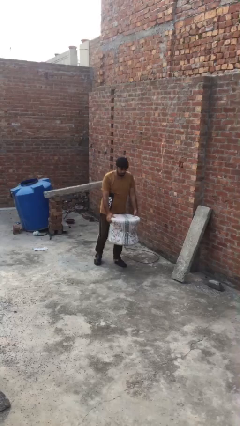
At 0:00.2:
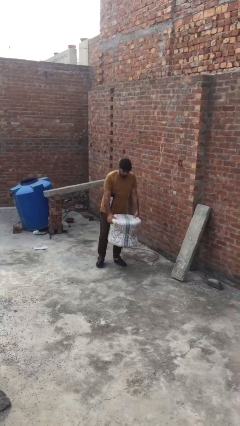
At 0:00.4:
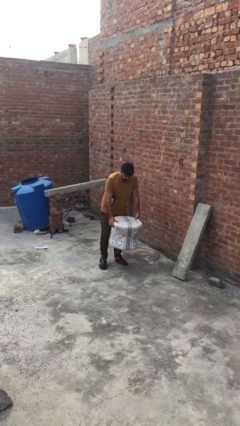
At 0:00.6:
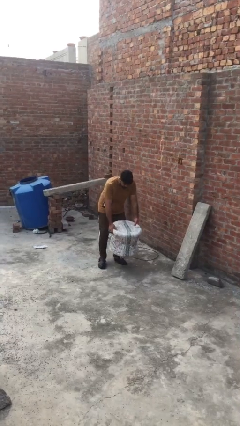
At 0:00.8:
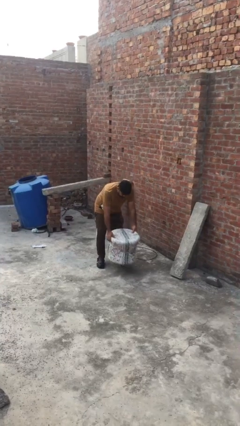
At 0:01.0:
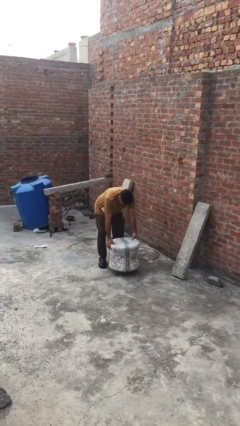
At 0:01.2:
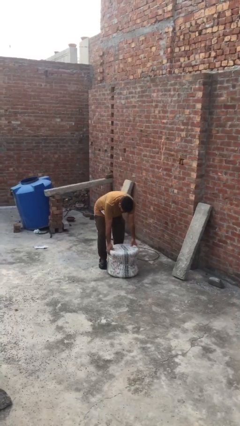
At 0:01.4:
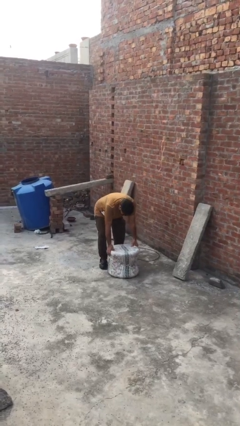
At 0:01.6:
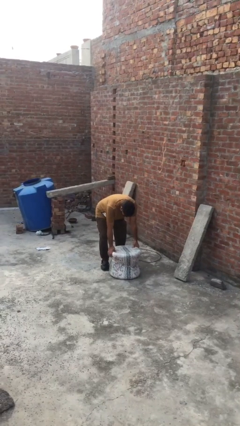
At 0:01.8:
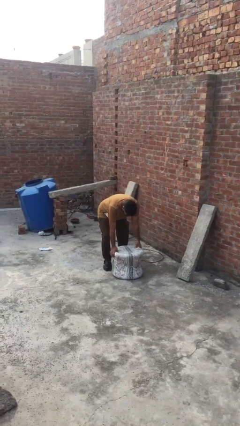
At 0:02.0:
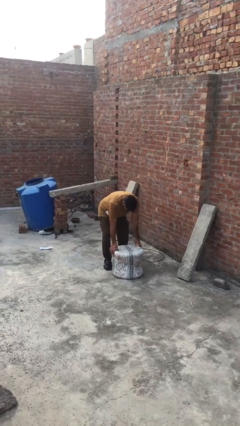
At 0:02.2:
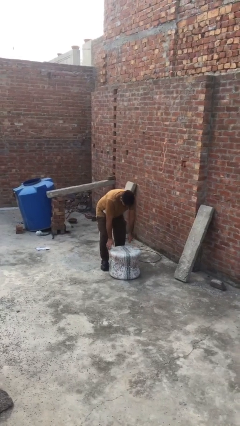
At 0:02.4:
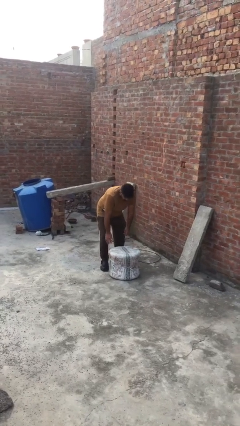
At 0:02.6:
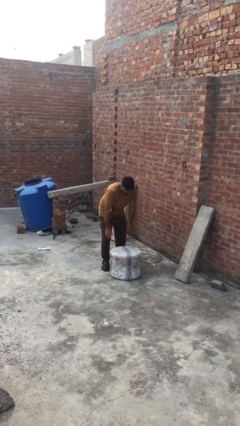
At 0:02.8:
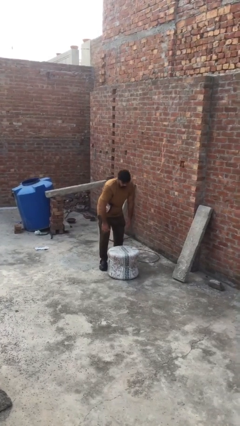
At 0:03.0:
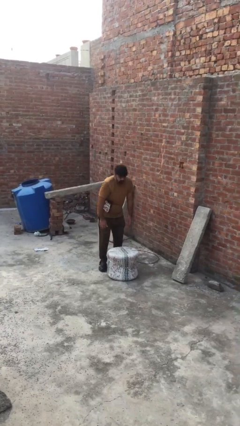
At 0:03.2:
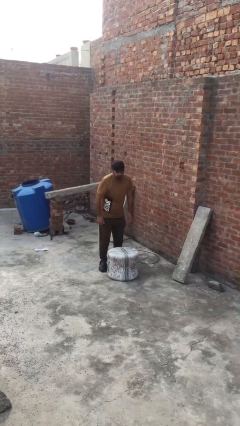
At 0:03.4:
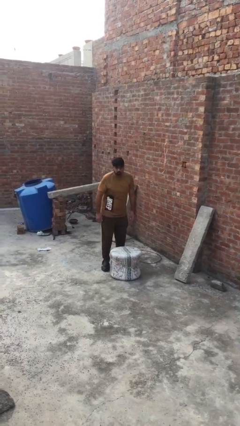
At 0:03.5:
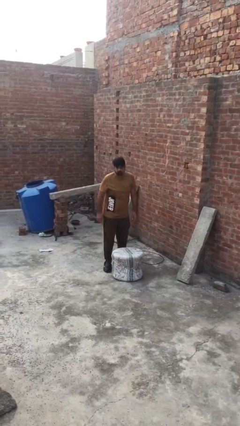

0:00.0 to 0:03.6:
person puts down object on floor

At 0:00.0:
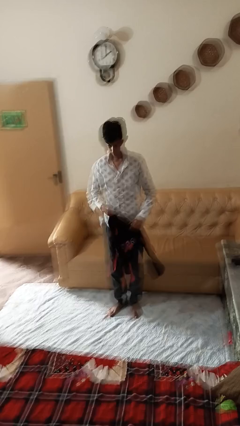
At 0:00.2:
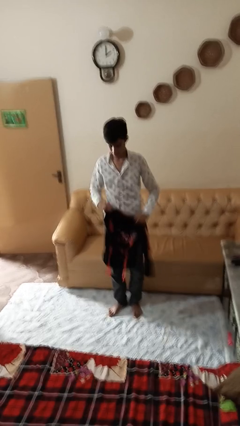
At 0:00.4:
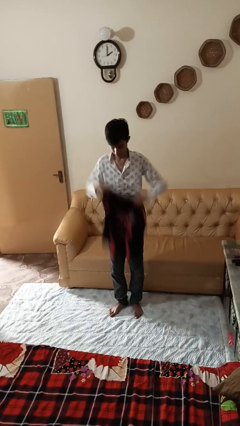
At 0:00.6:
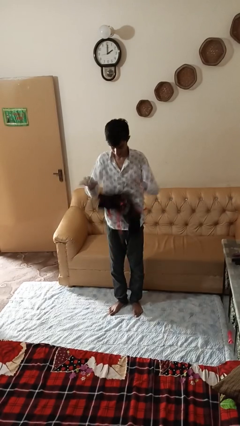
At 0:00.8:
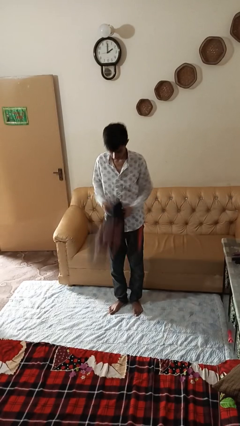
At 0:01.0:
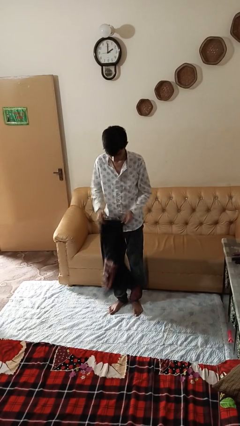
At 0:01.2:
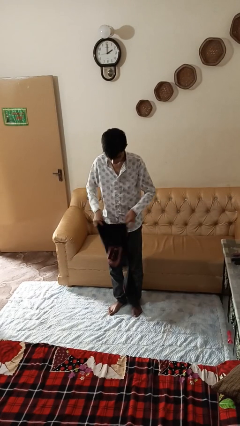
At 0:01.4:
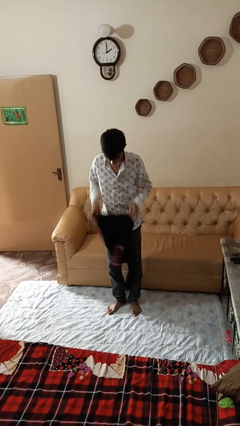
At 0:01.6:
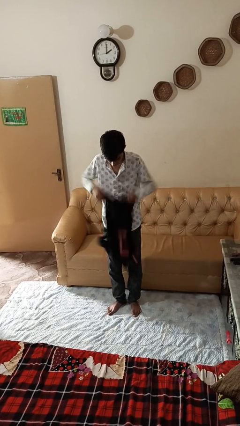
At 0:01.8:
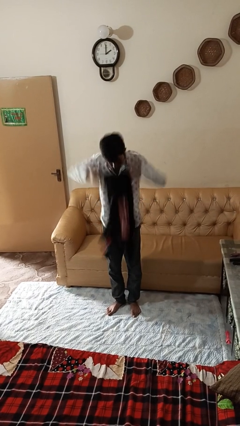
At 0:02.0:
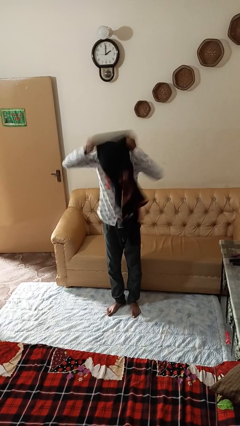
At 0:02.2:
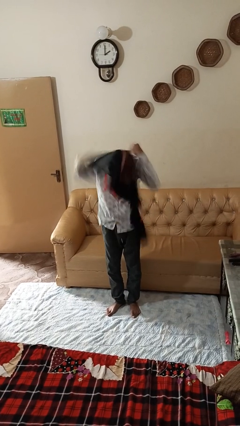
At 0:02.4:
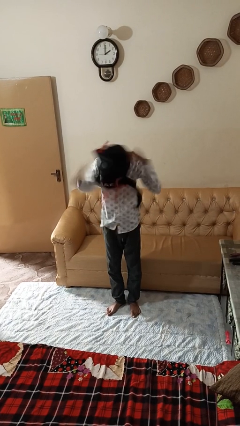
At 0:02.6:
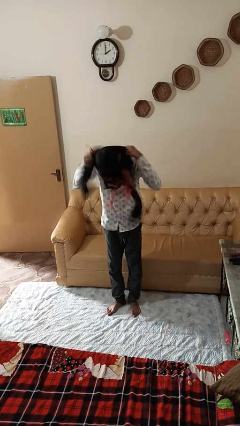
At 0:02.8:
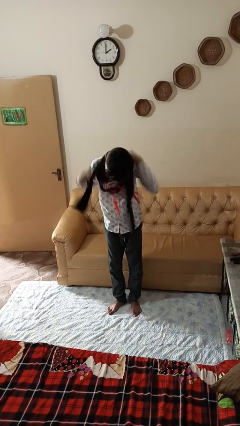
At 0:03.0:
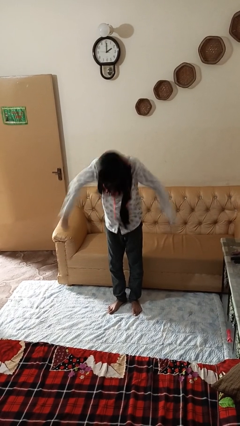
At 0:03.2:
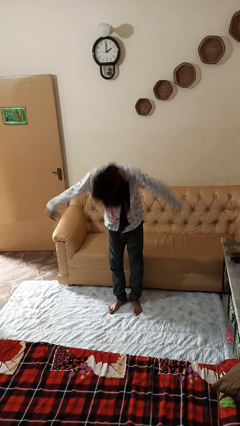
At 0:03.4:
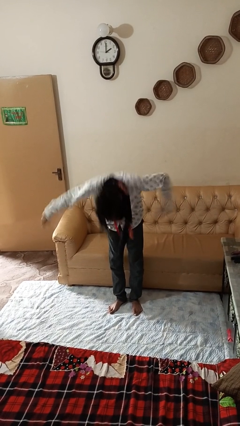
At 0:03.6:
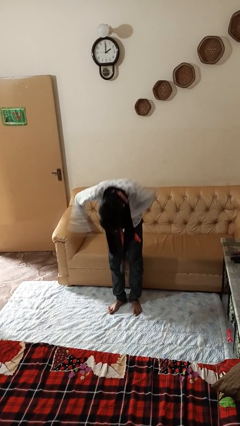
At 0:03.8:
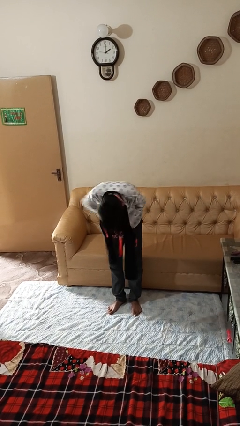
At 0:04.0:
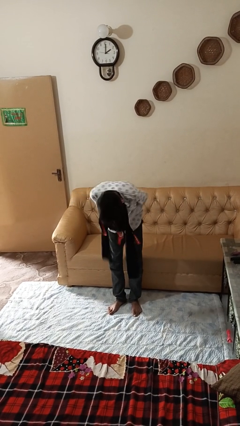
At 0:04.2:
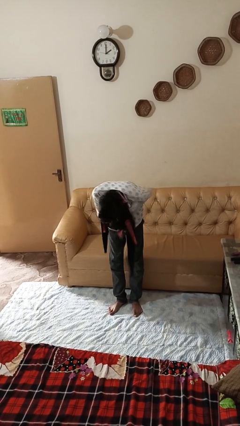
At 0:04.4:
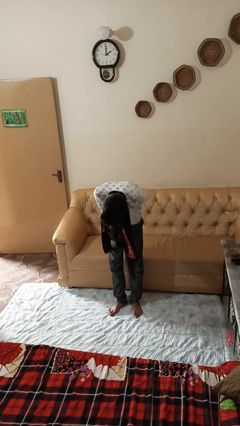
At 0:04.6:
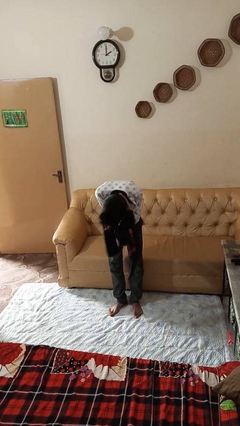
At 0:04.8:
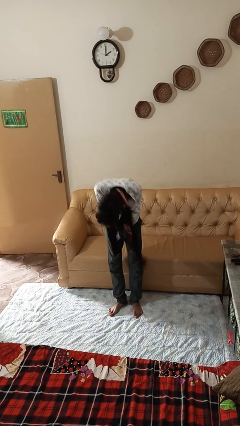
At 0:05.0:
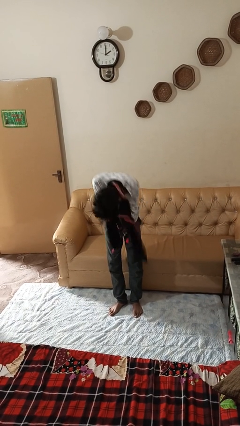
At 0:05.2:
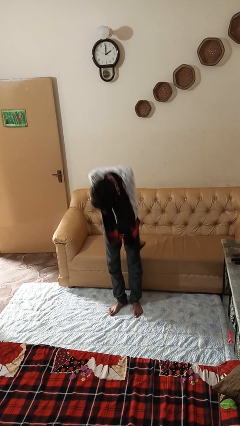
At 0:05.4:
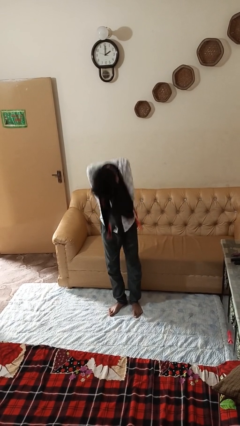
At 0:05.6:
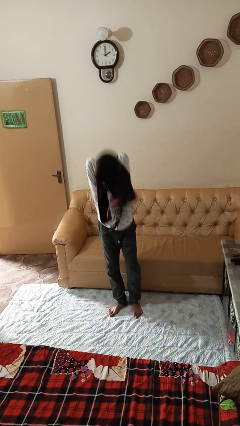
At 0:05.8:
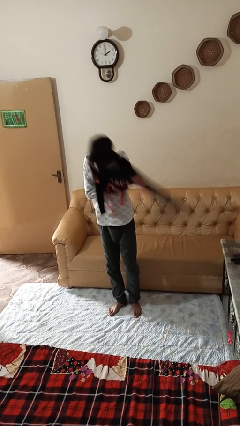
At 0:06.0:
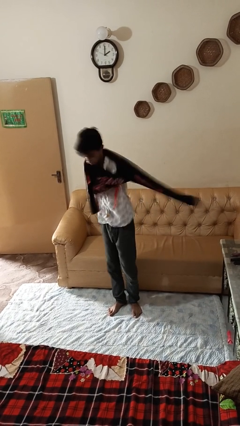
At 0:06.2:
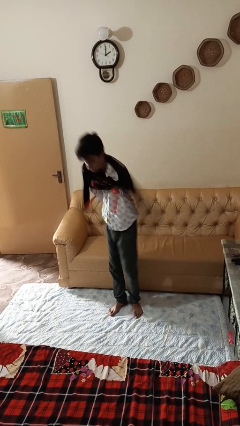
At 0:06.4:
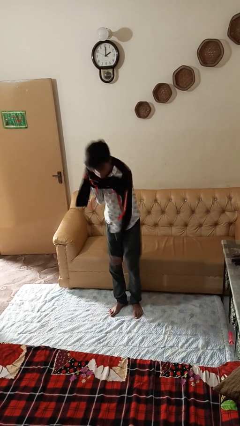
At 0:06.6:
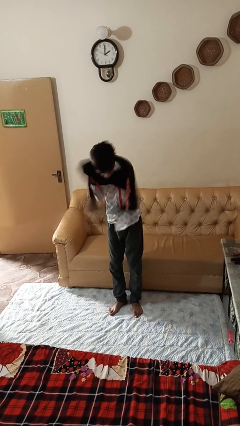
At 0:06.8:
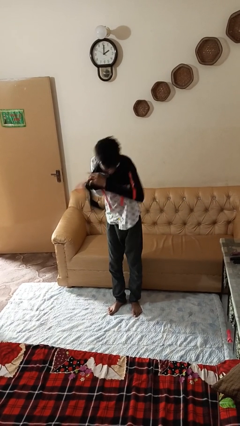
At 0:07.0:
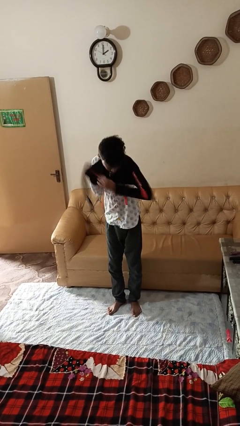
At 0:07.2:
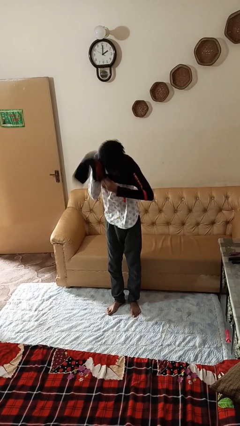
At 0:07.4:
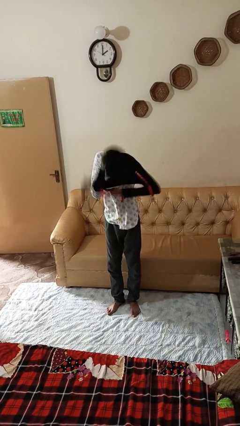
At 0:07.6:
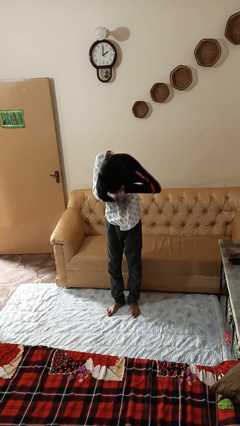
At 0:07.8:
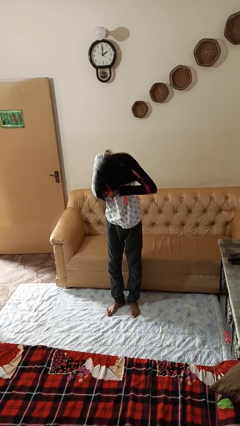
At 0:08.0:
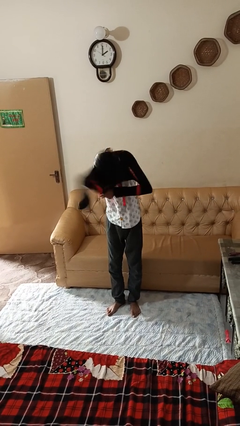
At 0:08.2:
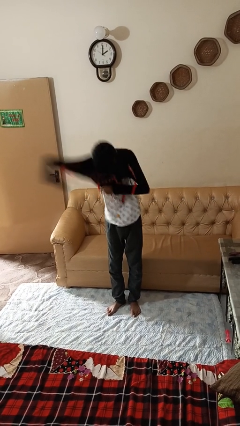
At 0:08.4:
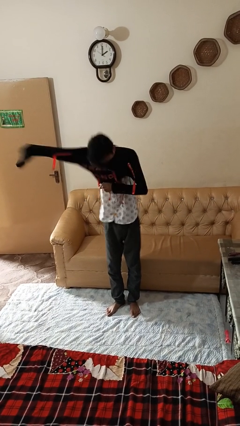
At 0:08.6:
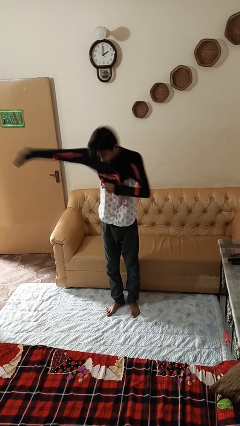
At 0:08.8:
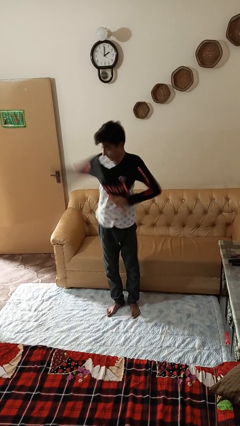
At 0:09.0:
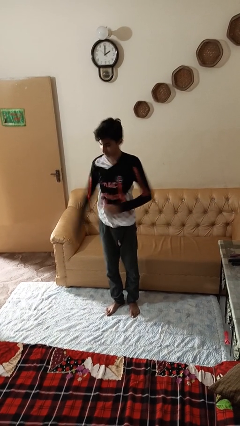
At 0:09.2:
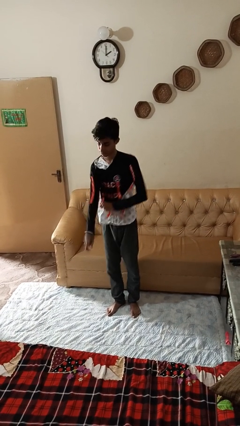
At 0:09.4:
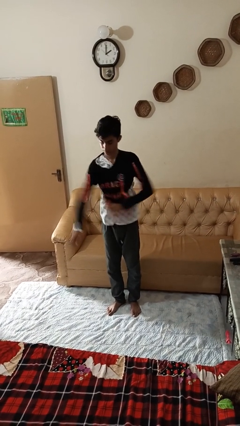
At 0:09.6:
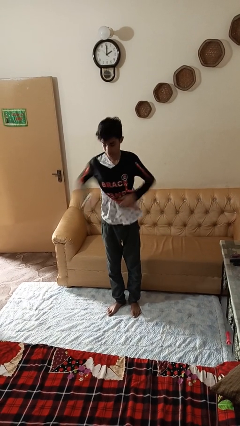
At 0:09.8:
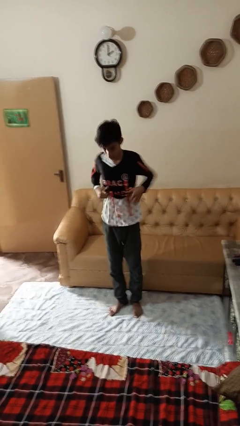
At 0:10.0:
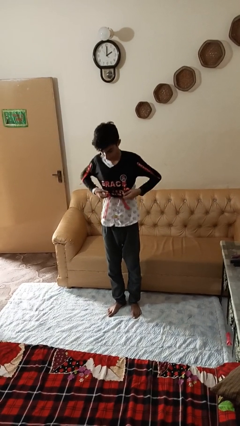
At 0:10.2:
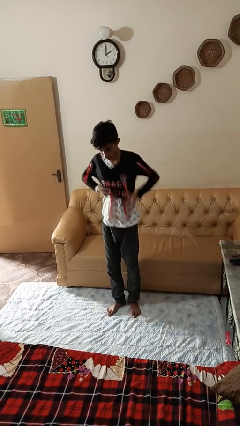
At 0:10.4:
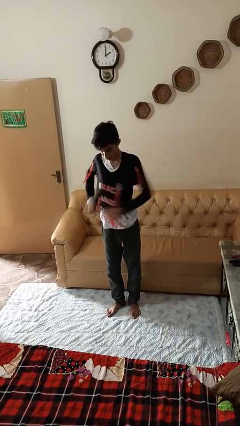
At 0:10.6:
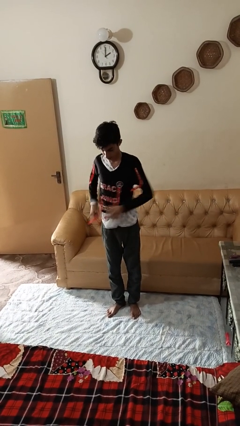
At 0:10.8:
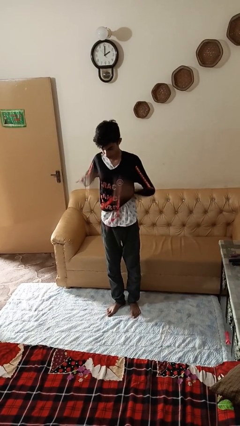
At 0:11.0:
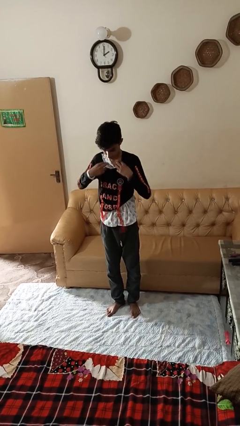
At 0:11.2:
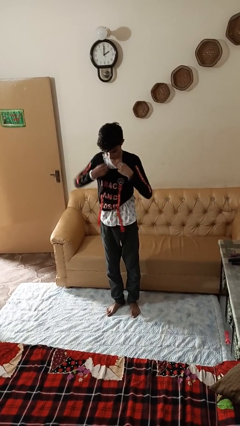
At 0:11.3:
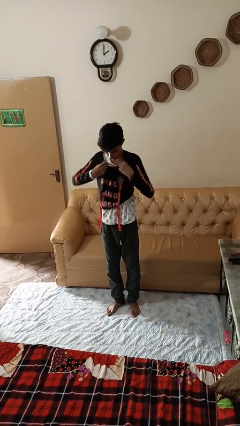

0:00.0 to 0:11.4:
person puts on shirt

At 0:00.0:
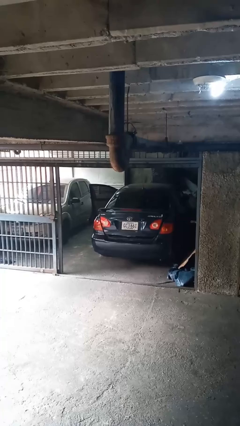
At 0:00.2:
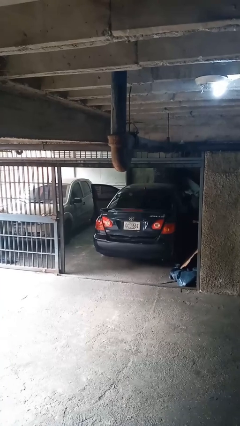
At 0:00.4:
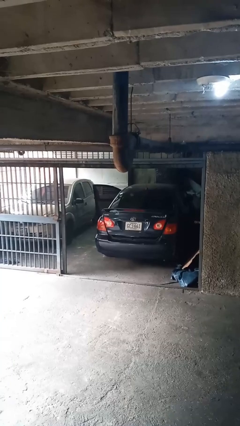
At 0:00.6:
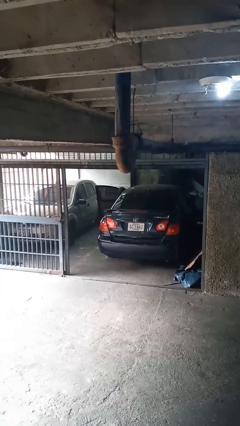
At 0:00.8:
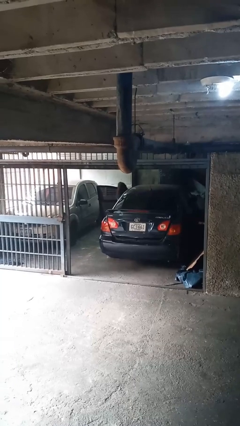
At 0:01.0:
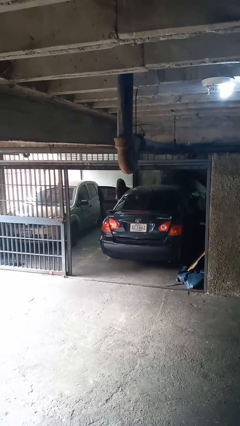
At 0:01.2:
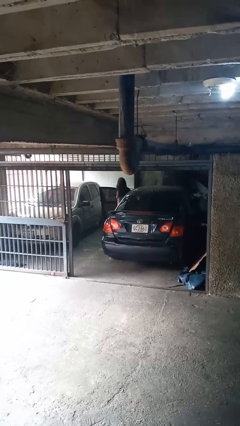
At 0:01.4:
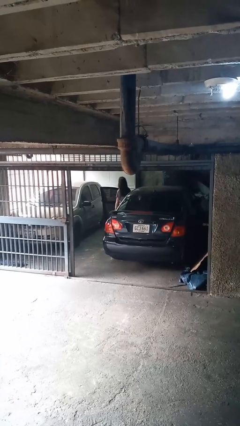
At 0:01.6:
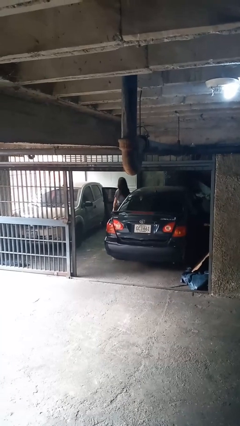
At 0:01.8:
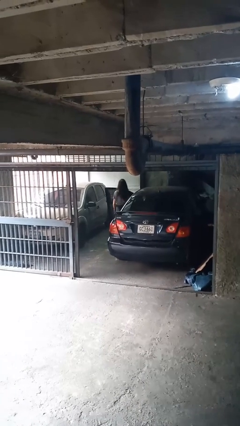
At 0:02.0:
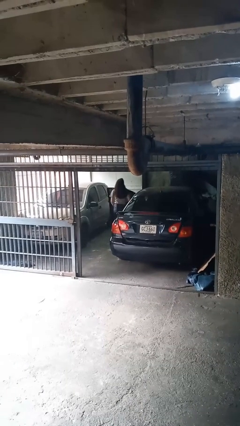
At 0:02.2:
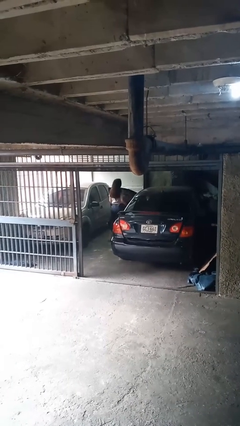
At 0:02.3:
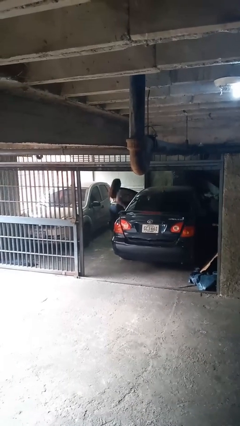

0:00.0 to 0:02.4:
person exits car

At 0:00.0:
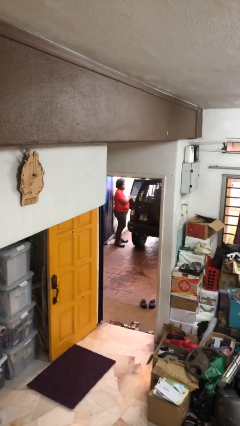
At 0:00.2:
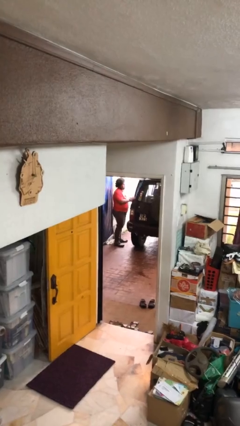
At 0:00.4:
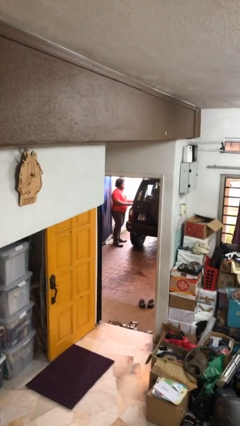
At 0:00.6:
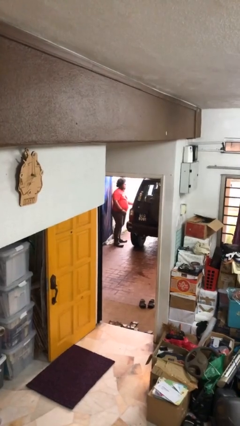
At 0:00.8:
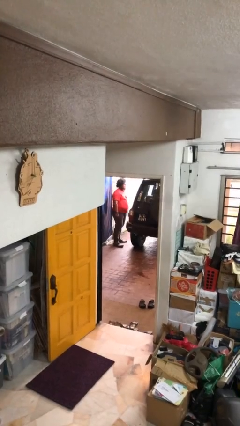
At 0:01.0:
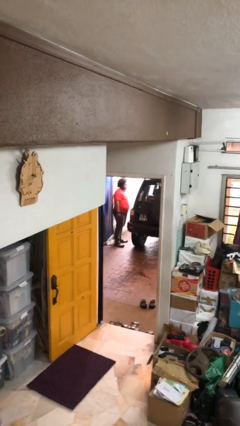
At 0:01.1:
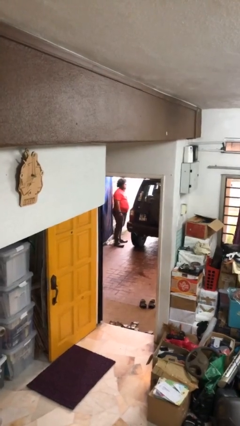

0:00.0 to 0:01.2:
person closes car door
